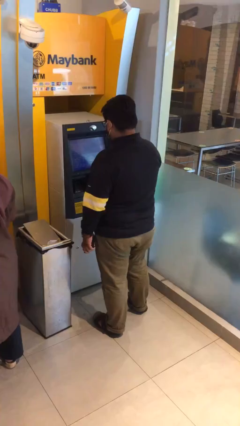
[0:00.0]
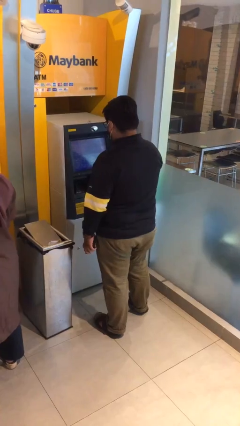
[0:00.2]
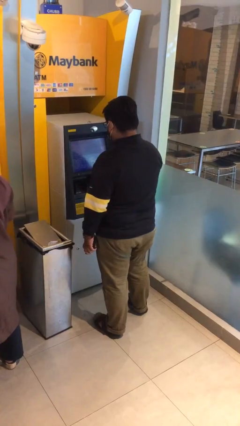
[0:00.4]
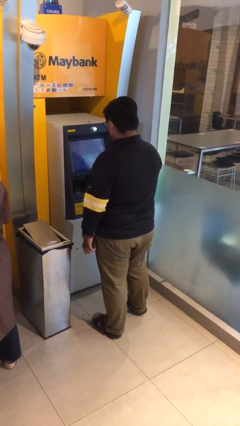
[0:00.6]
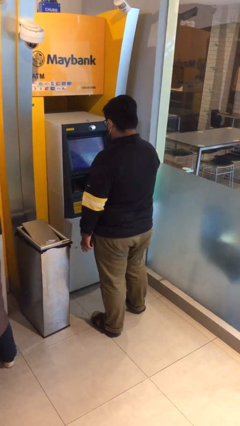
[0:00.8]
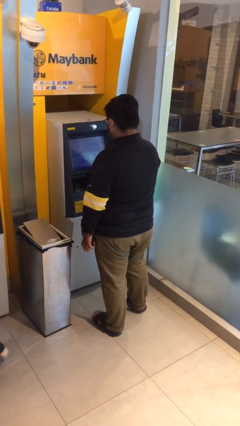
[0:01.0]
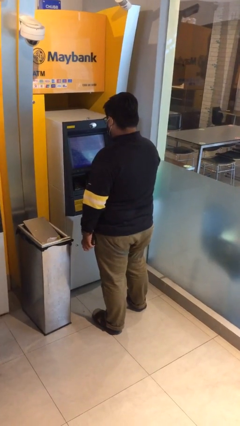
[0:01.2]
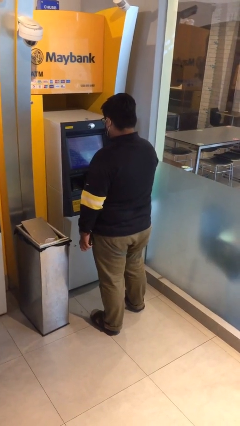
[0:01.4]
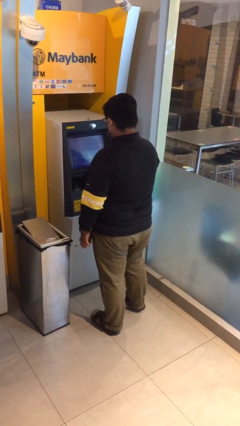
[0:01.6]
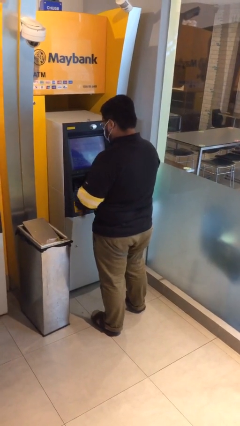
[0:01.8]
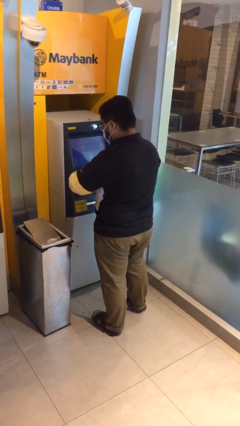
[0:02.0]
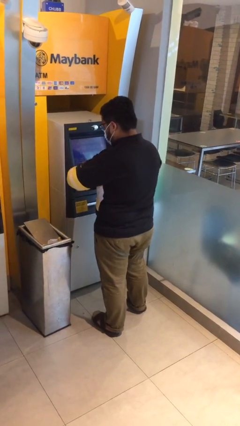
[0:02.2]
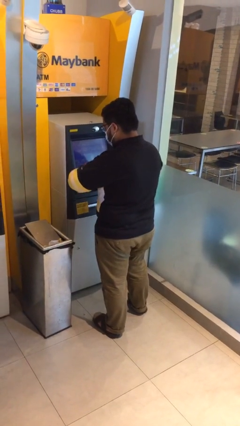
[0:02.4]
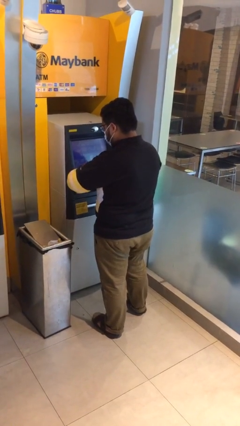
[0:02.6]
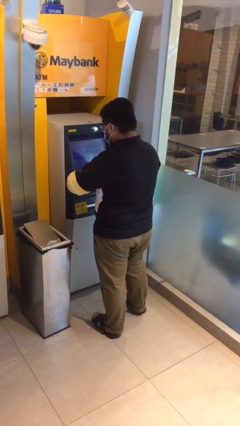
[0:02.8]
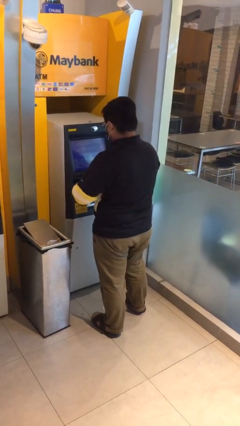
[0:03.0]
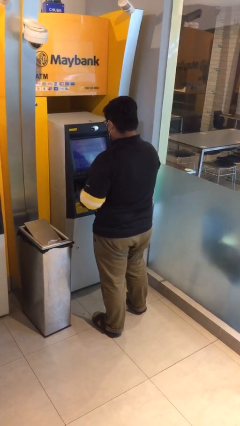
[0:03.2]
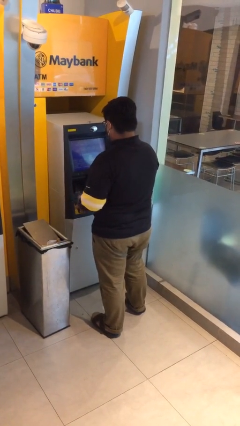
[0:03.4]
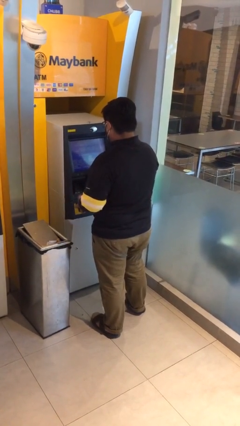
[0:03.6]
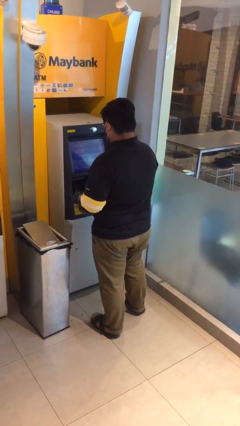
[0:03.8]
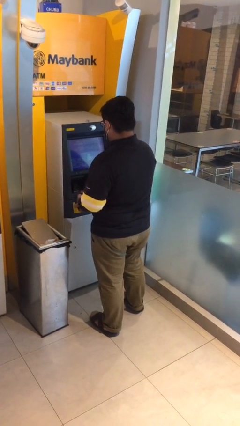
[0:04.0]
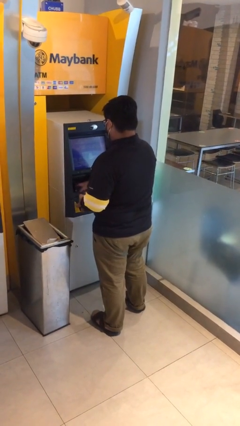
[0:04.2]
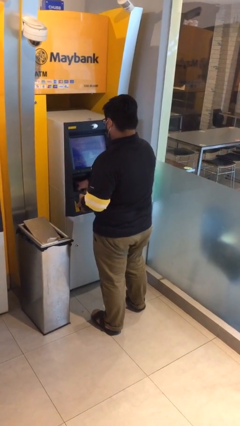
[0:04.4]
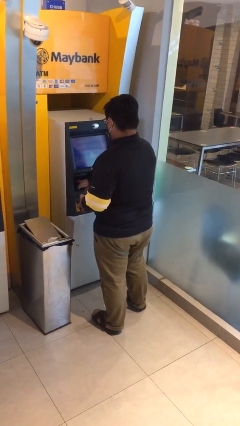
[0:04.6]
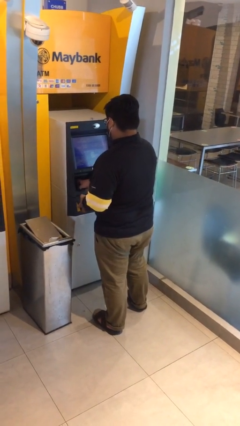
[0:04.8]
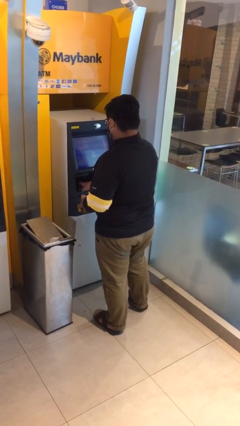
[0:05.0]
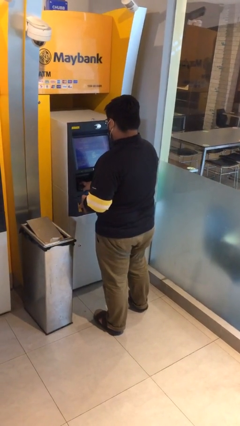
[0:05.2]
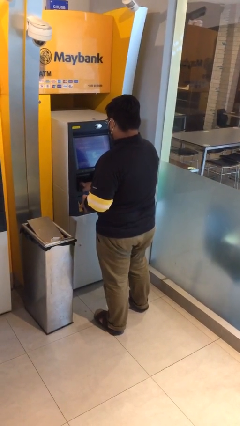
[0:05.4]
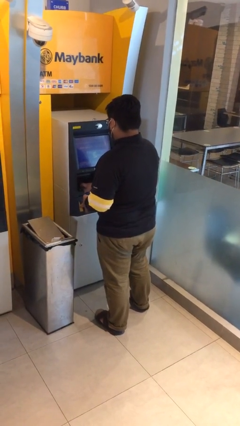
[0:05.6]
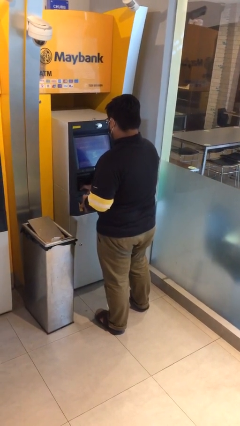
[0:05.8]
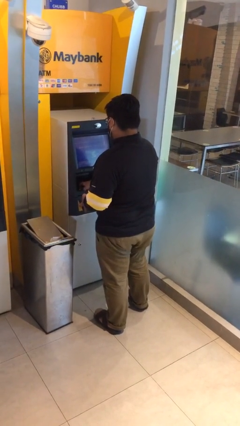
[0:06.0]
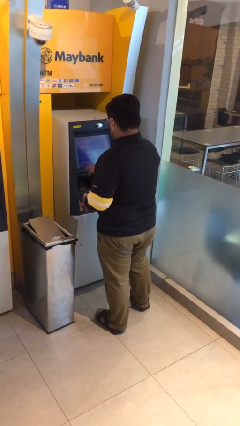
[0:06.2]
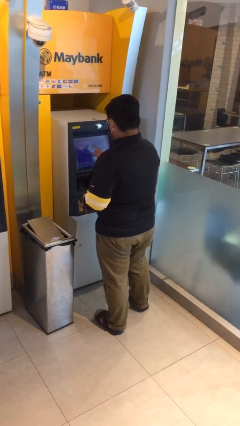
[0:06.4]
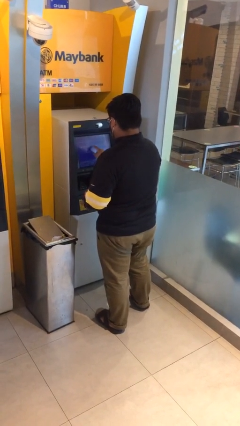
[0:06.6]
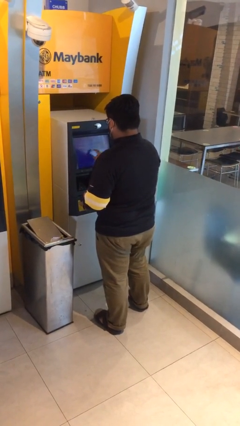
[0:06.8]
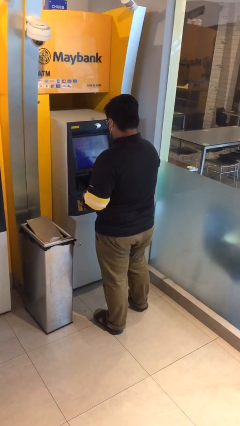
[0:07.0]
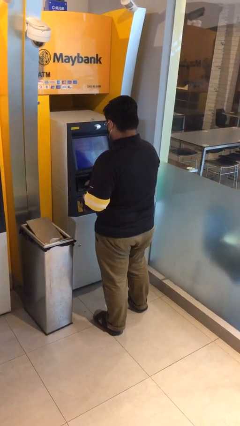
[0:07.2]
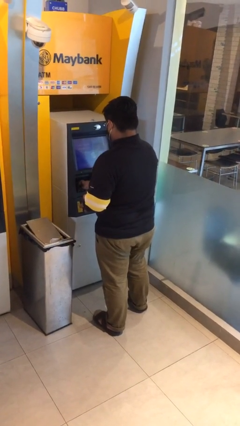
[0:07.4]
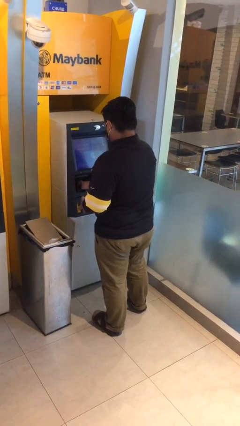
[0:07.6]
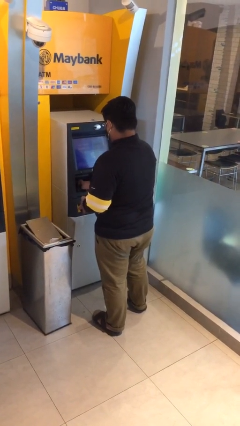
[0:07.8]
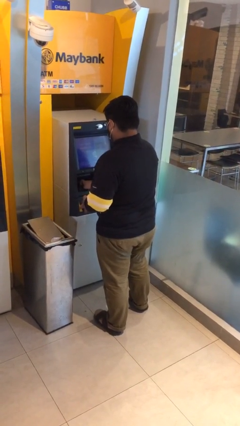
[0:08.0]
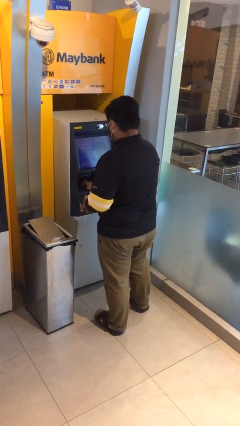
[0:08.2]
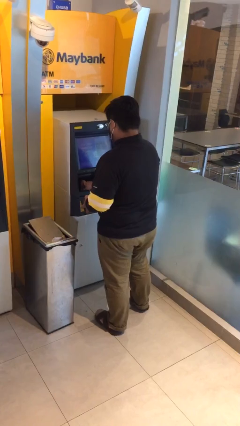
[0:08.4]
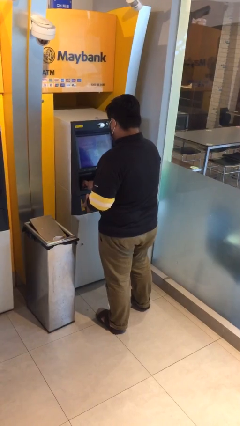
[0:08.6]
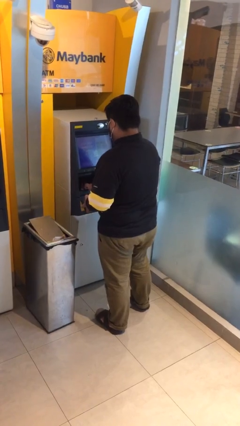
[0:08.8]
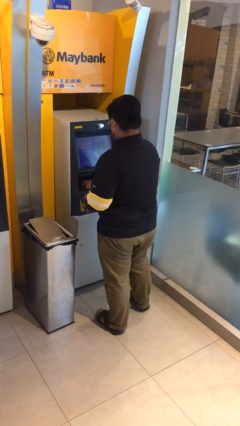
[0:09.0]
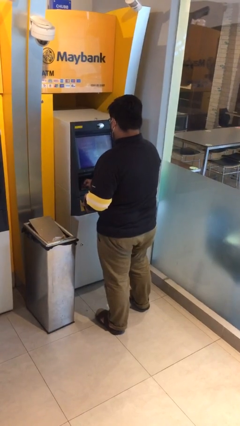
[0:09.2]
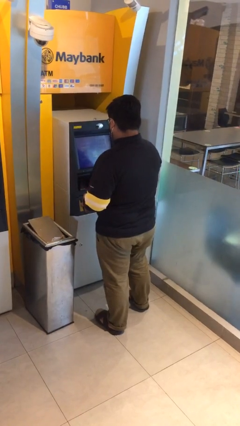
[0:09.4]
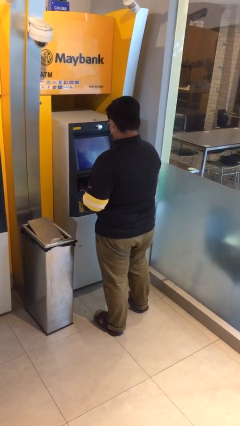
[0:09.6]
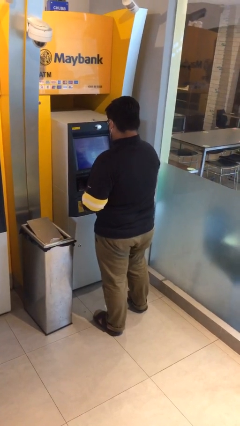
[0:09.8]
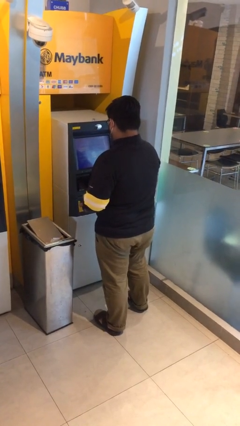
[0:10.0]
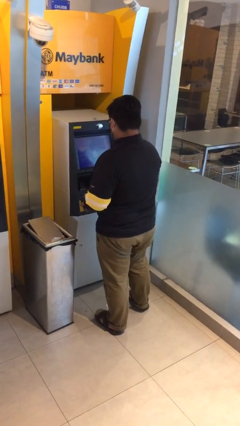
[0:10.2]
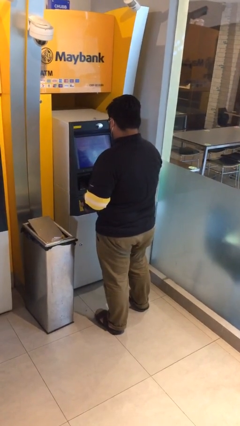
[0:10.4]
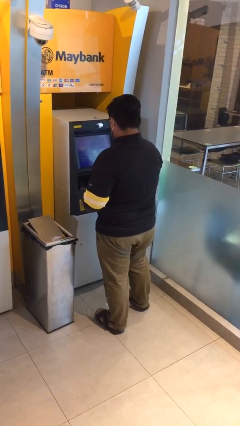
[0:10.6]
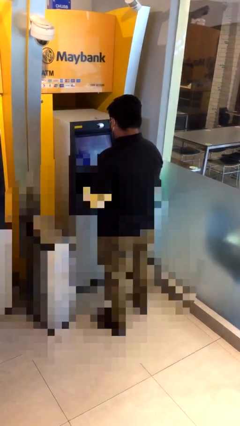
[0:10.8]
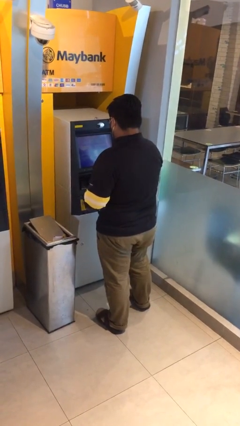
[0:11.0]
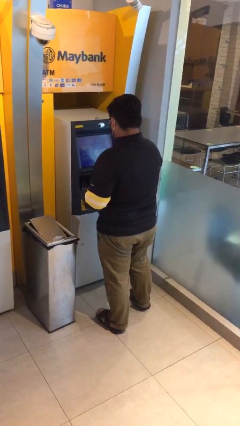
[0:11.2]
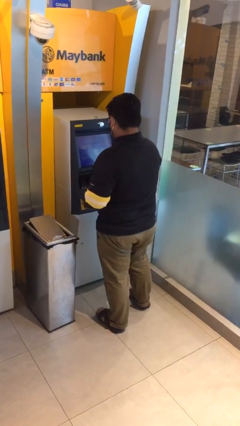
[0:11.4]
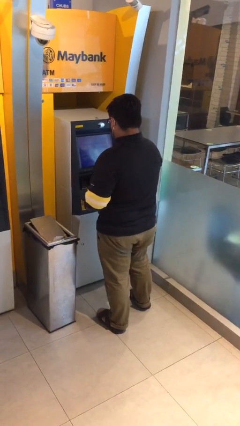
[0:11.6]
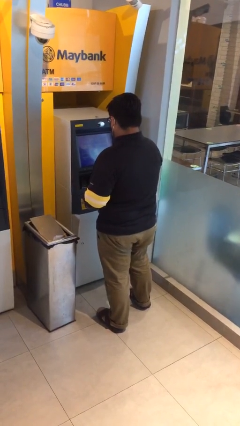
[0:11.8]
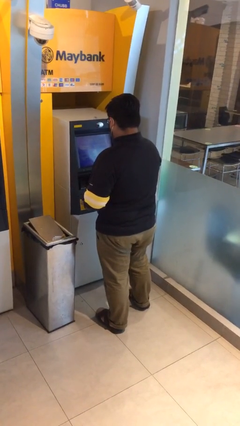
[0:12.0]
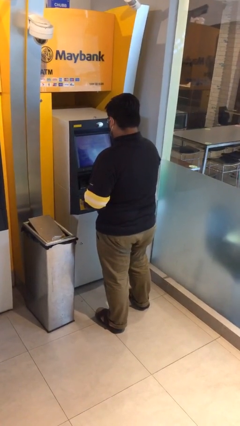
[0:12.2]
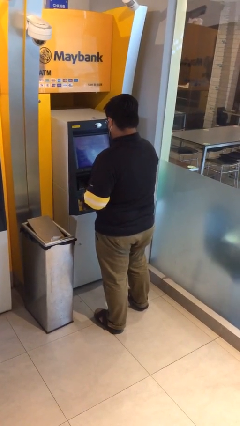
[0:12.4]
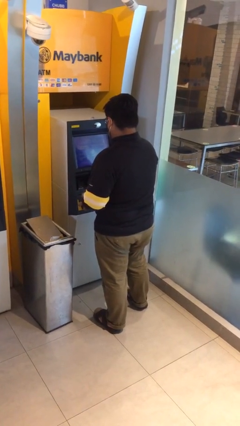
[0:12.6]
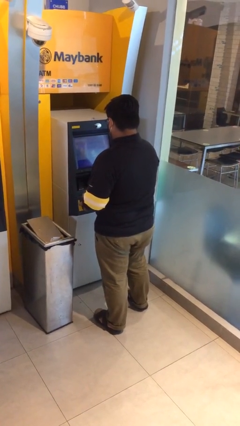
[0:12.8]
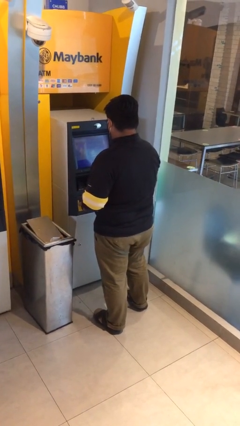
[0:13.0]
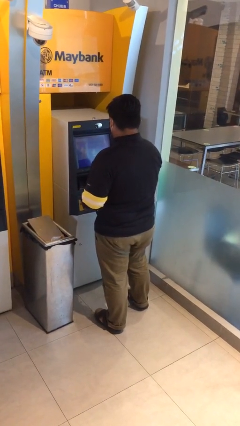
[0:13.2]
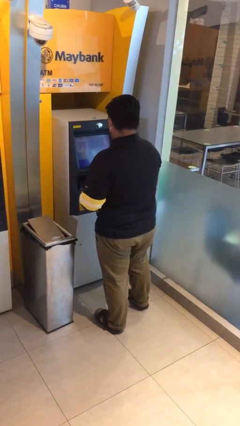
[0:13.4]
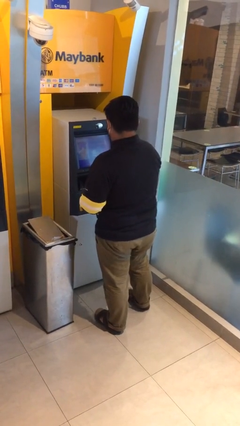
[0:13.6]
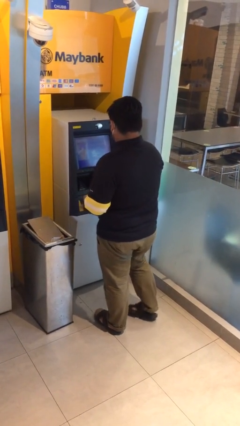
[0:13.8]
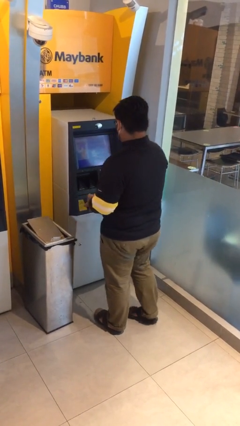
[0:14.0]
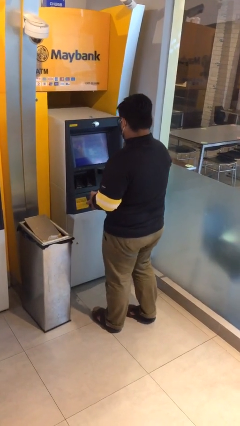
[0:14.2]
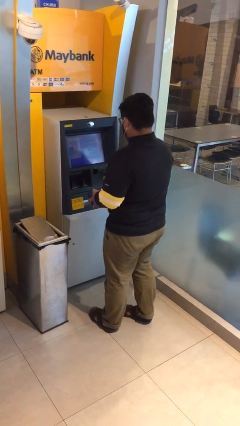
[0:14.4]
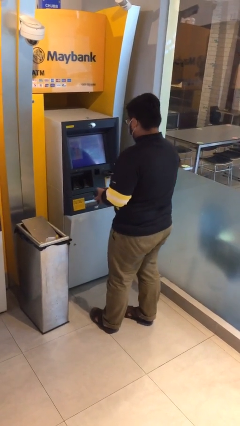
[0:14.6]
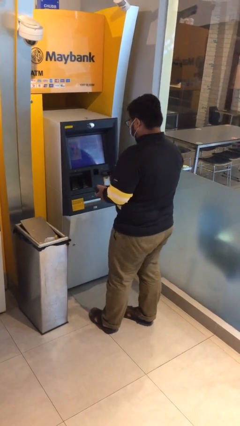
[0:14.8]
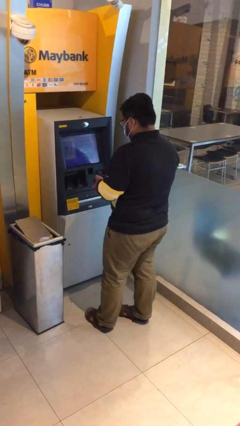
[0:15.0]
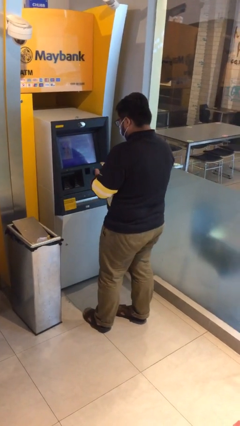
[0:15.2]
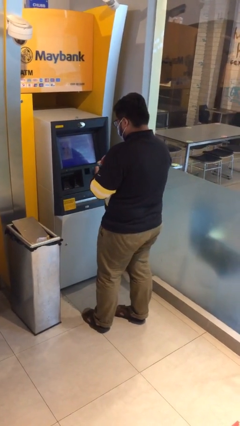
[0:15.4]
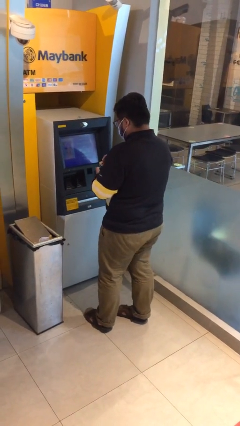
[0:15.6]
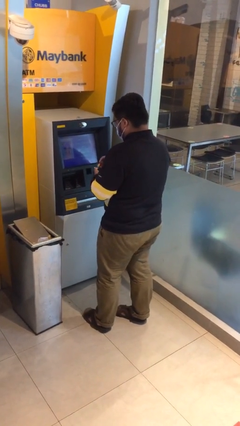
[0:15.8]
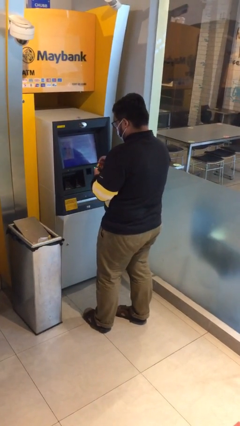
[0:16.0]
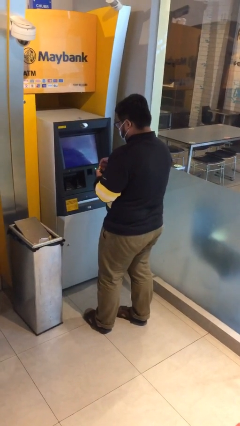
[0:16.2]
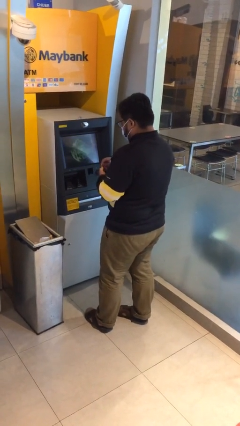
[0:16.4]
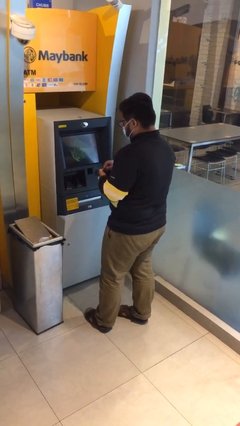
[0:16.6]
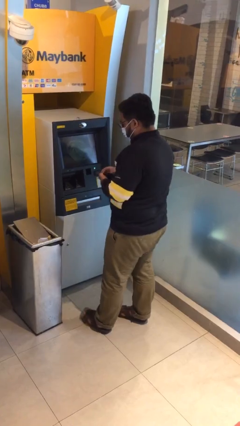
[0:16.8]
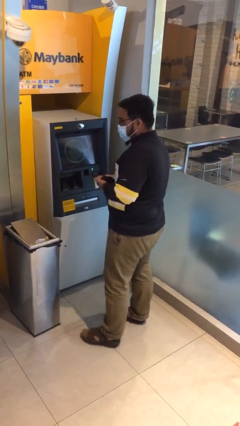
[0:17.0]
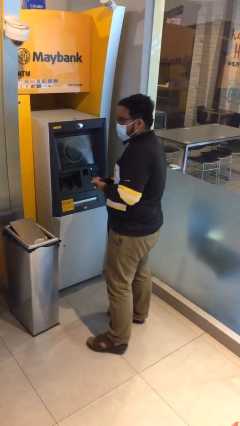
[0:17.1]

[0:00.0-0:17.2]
person purchases from machine

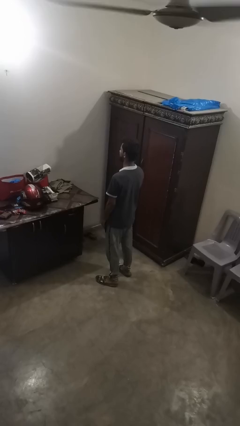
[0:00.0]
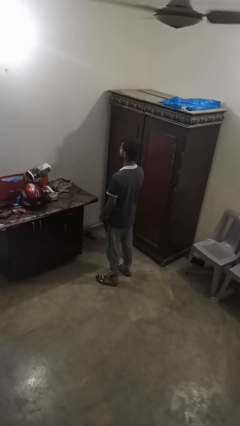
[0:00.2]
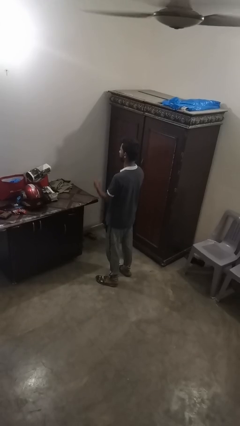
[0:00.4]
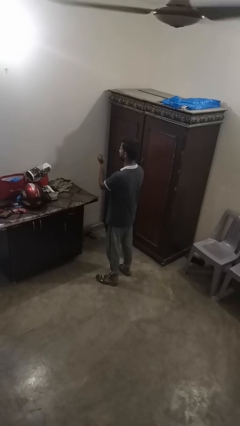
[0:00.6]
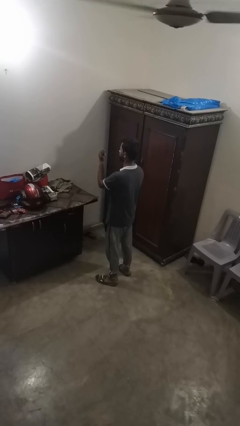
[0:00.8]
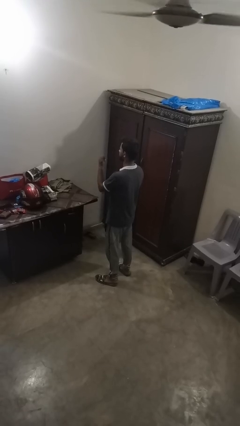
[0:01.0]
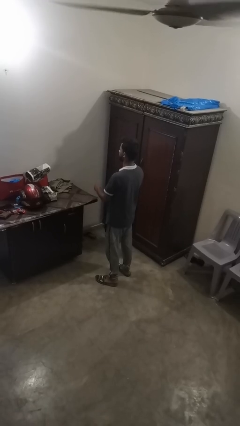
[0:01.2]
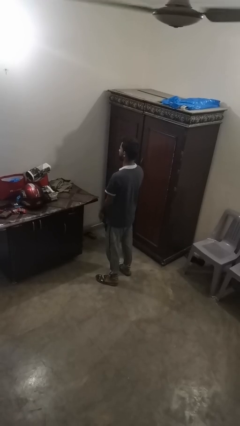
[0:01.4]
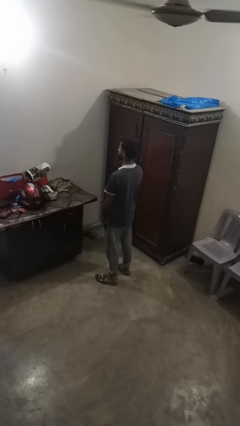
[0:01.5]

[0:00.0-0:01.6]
person snaps fingers
